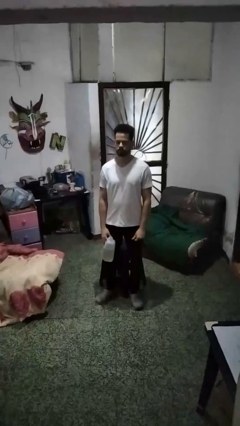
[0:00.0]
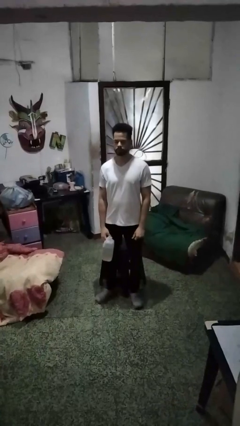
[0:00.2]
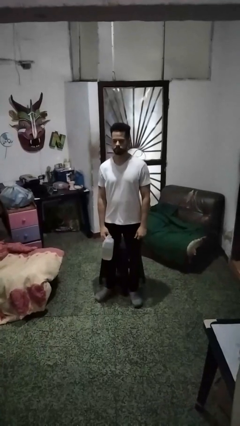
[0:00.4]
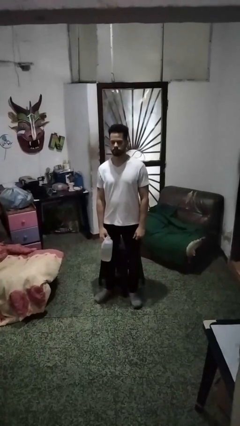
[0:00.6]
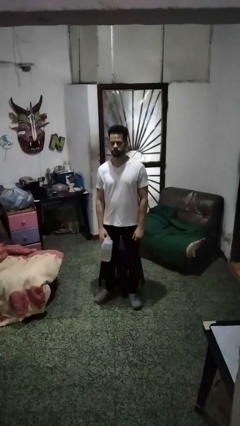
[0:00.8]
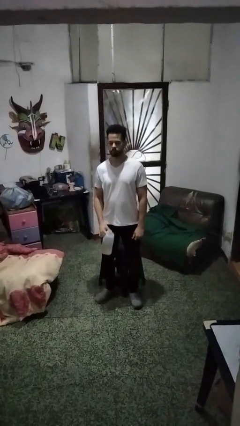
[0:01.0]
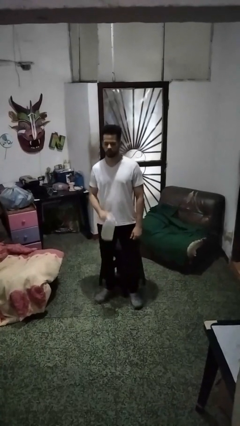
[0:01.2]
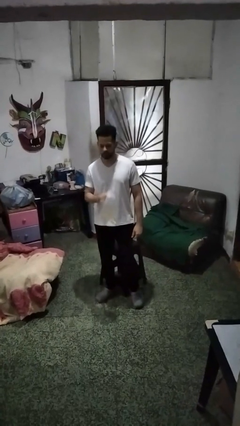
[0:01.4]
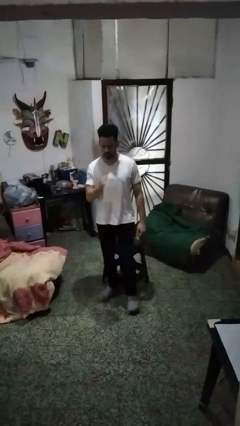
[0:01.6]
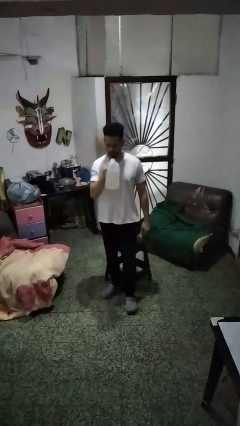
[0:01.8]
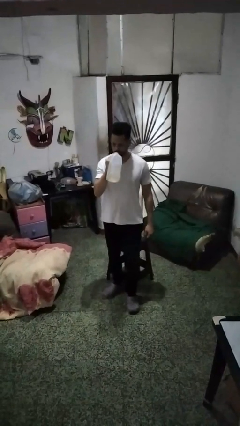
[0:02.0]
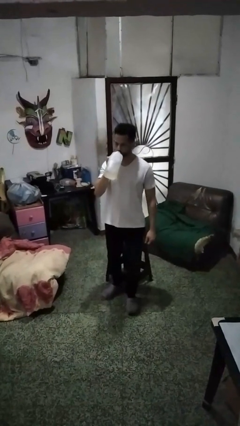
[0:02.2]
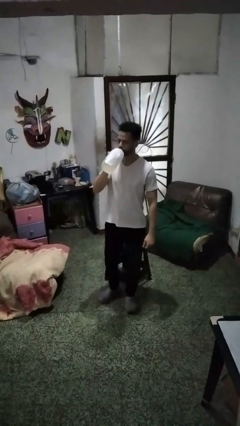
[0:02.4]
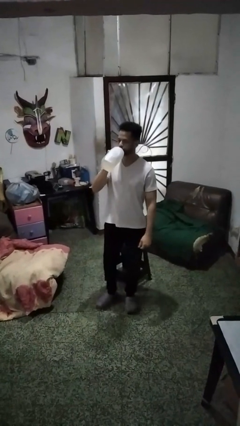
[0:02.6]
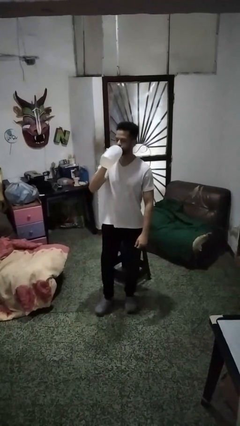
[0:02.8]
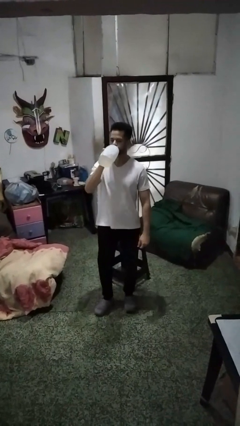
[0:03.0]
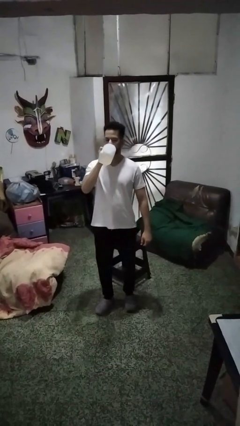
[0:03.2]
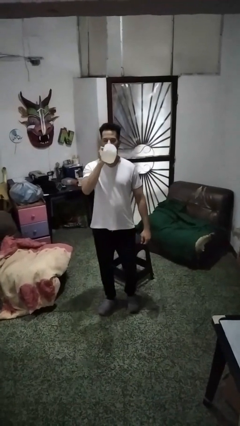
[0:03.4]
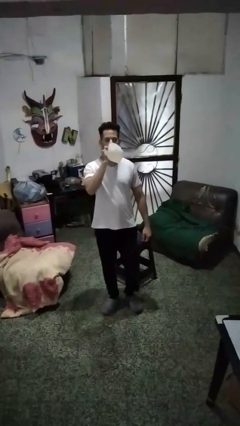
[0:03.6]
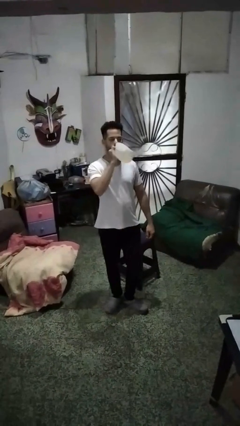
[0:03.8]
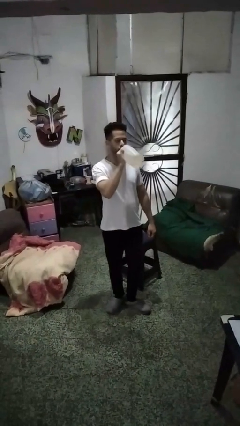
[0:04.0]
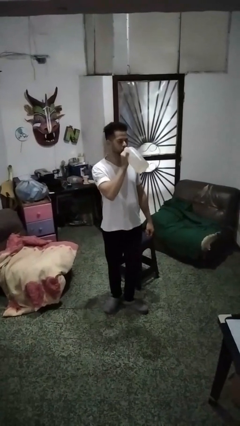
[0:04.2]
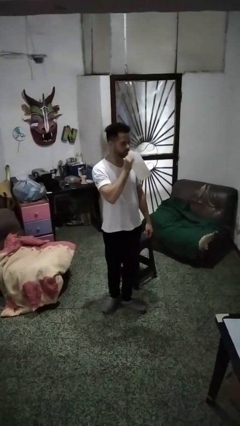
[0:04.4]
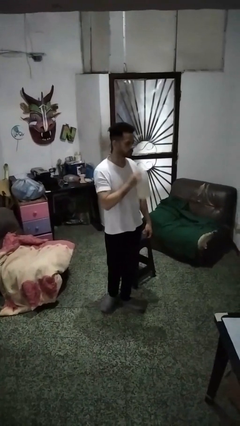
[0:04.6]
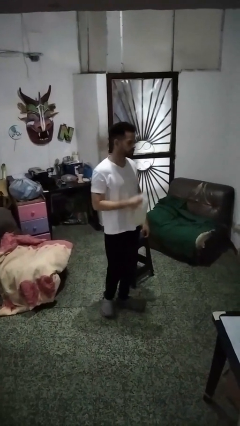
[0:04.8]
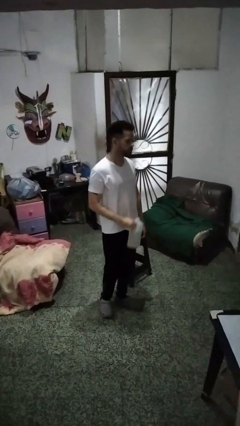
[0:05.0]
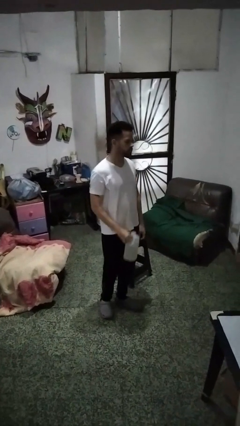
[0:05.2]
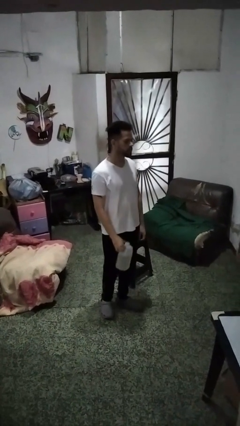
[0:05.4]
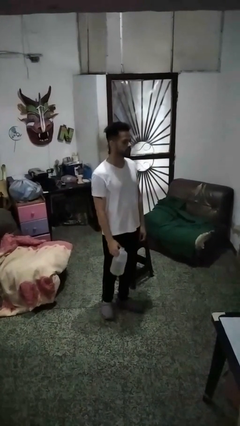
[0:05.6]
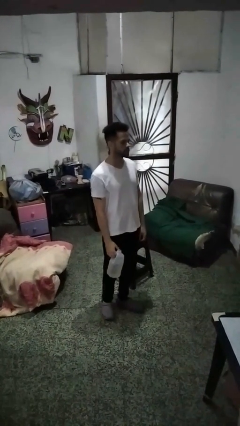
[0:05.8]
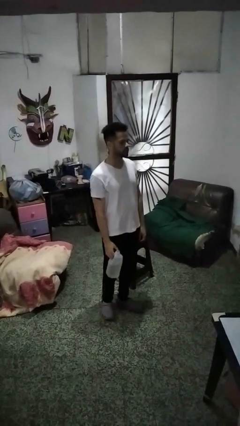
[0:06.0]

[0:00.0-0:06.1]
person drinks from bottle

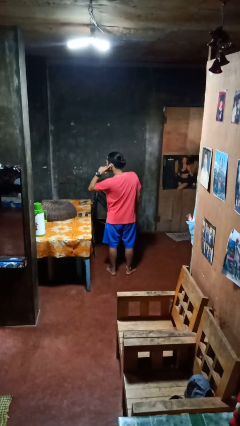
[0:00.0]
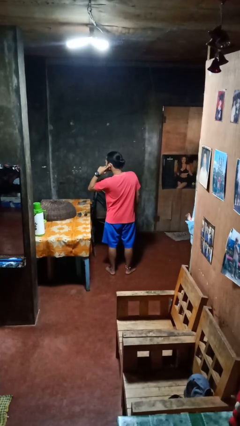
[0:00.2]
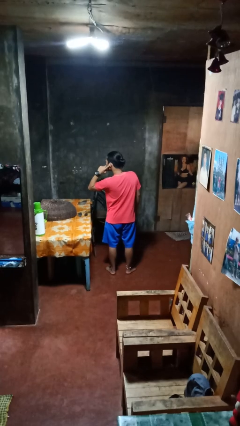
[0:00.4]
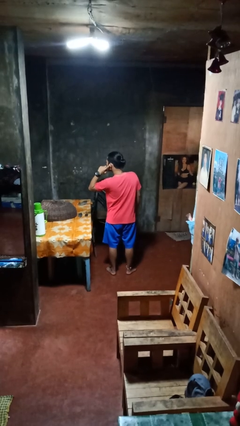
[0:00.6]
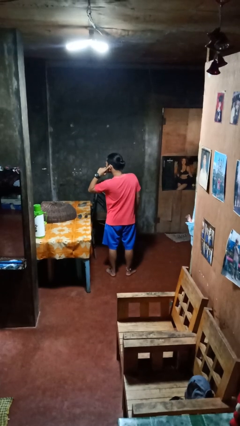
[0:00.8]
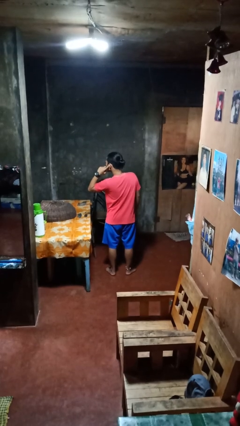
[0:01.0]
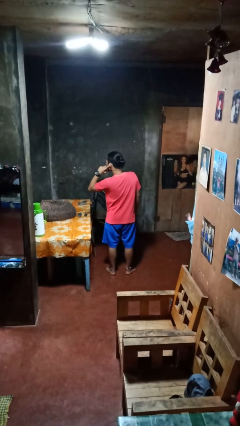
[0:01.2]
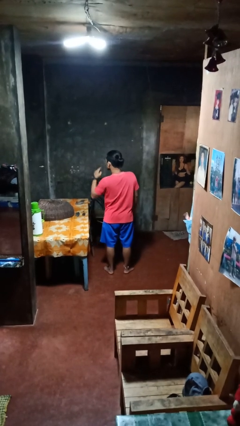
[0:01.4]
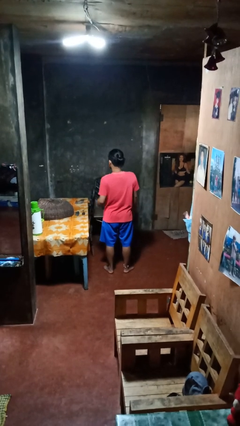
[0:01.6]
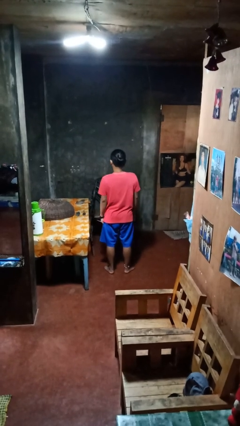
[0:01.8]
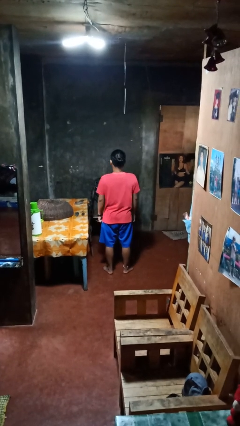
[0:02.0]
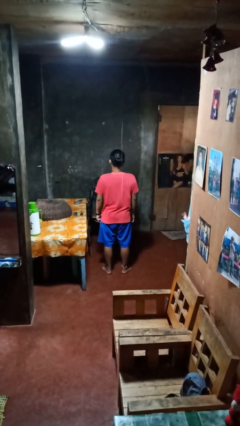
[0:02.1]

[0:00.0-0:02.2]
person gestures listen closely

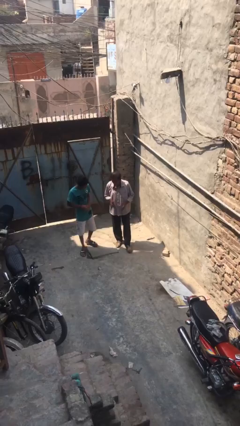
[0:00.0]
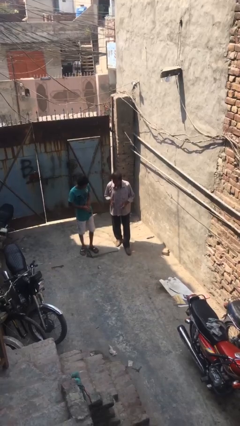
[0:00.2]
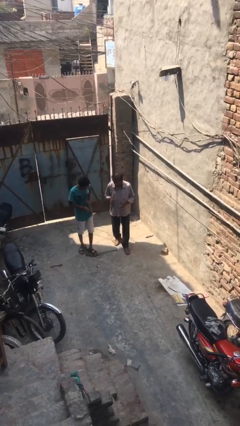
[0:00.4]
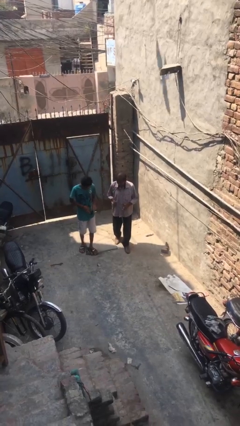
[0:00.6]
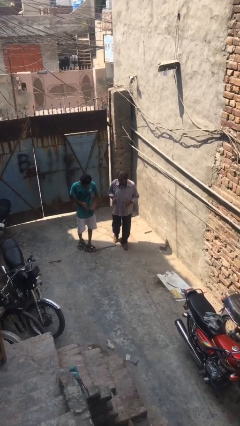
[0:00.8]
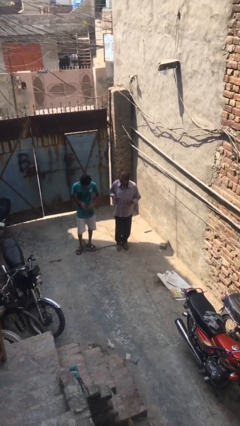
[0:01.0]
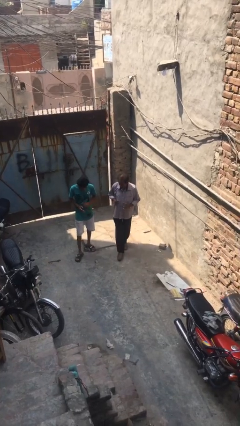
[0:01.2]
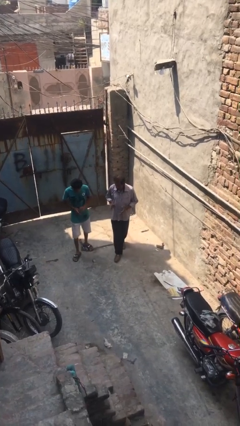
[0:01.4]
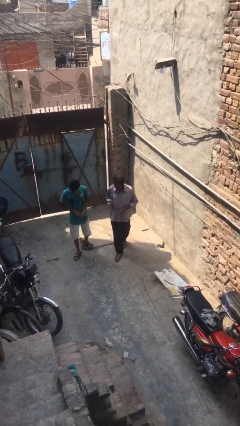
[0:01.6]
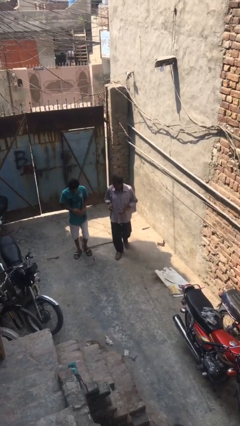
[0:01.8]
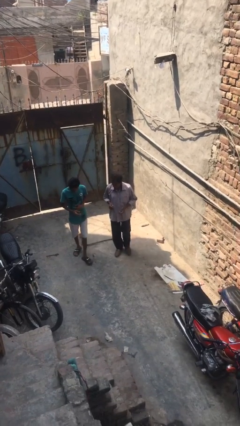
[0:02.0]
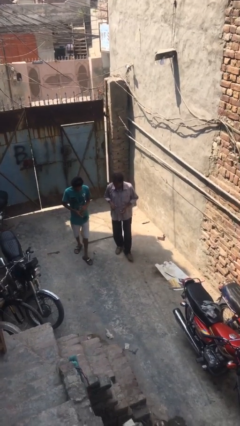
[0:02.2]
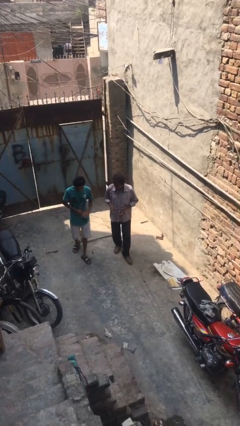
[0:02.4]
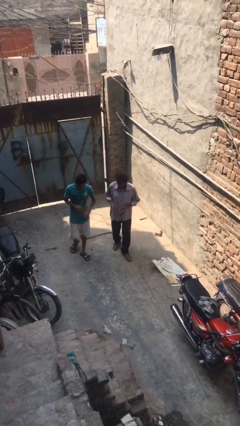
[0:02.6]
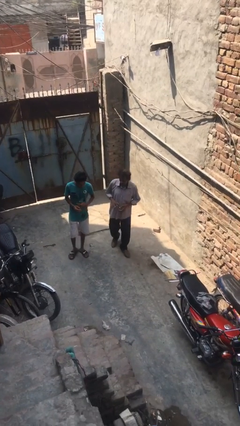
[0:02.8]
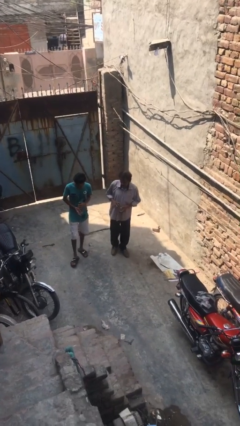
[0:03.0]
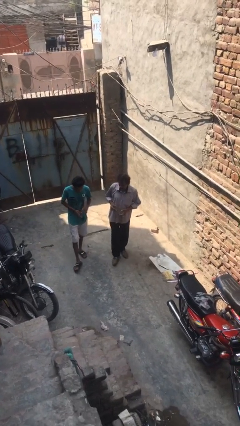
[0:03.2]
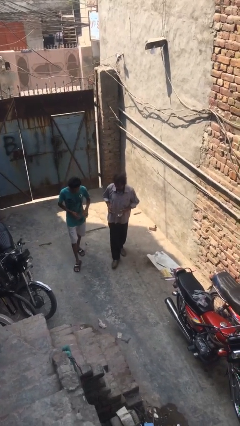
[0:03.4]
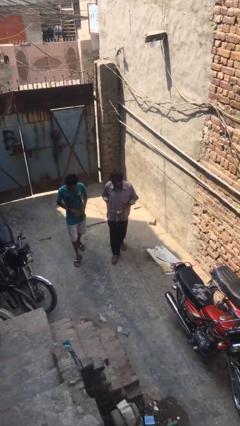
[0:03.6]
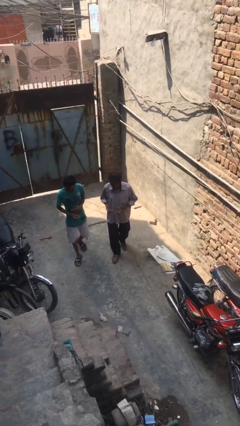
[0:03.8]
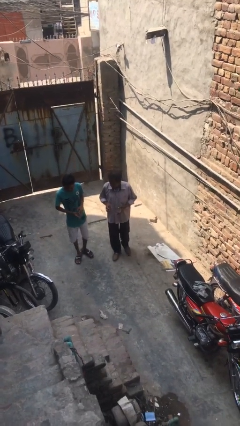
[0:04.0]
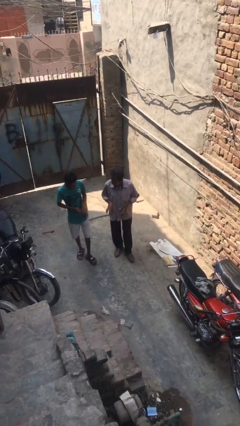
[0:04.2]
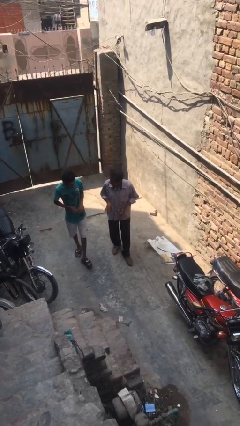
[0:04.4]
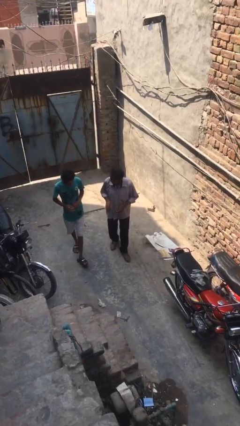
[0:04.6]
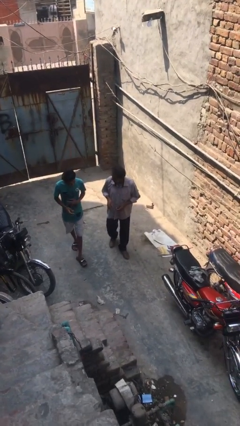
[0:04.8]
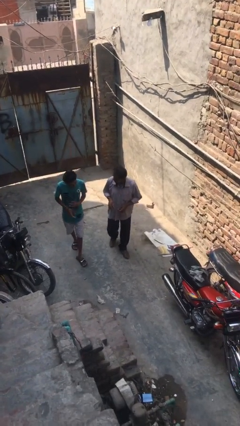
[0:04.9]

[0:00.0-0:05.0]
person talks to person

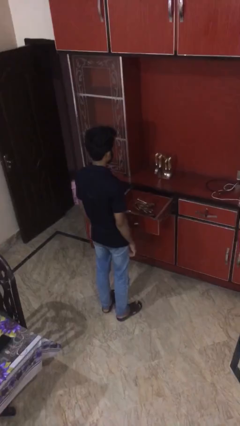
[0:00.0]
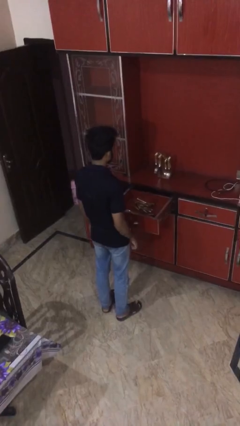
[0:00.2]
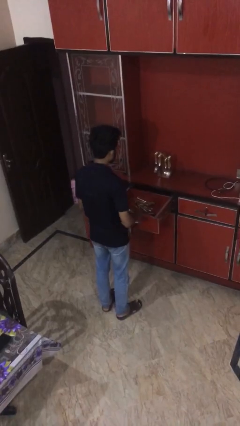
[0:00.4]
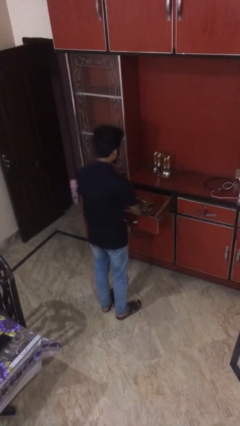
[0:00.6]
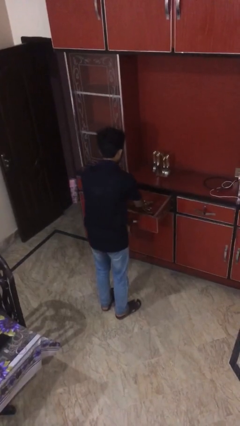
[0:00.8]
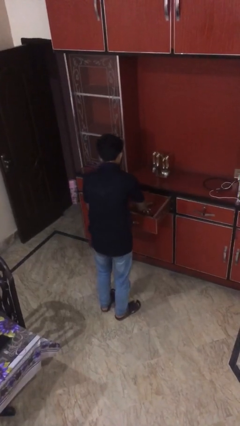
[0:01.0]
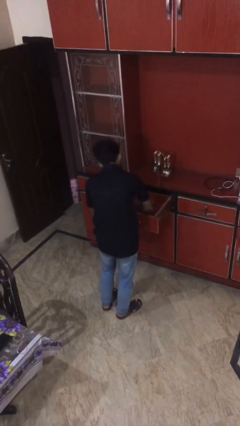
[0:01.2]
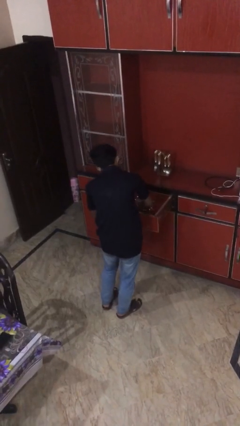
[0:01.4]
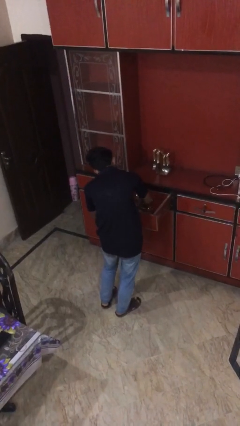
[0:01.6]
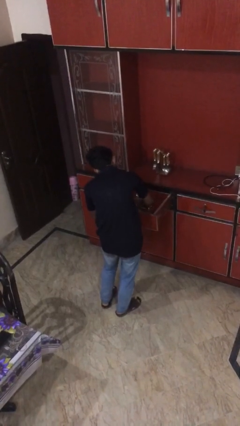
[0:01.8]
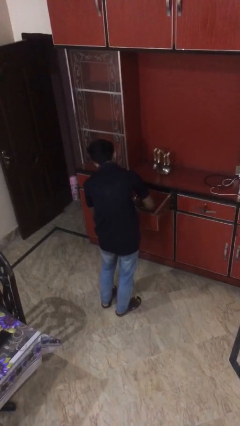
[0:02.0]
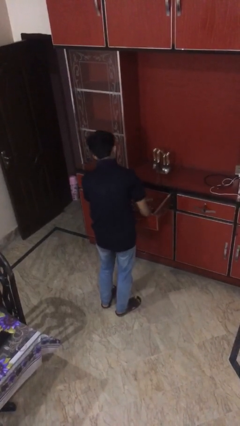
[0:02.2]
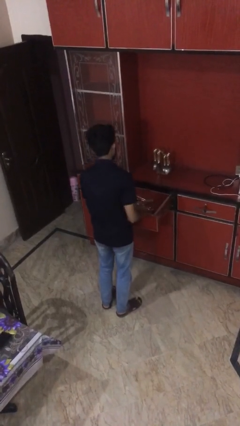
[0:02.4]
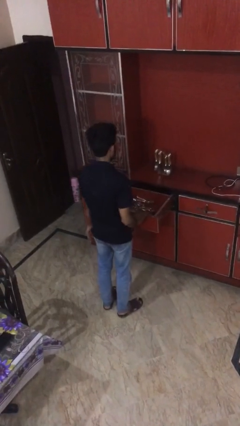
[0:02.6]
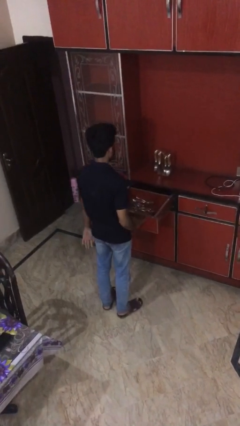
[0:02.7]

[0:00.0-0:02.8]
person searches in kitchen drawer

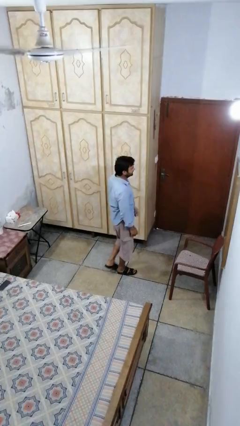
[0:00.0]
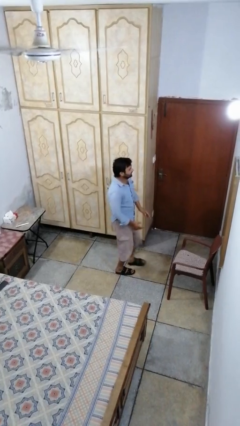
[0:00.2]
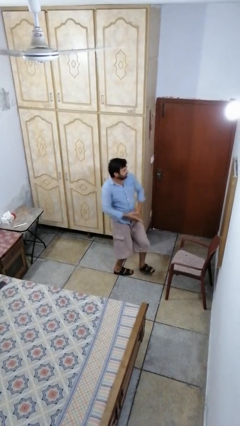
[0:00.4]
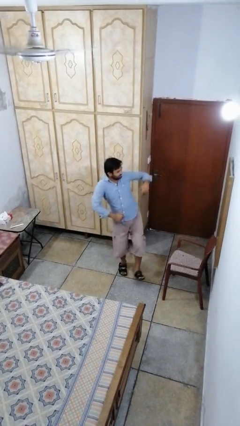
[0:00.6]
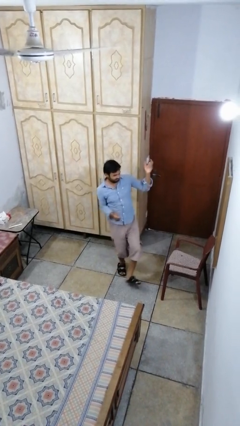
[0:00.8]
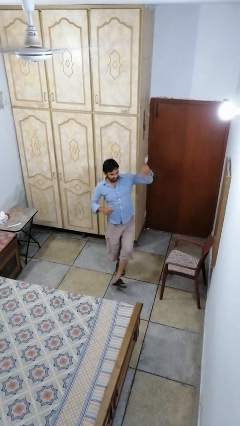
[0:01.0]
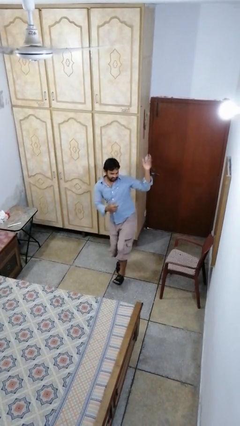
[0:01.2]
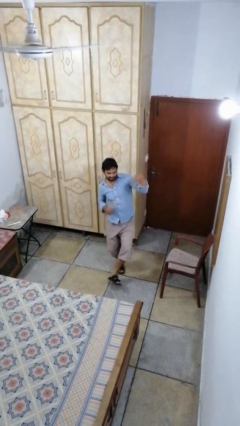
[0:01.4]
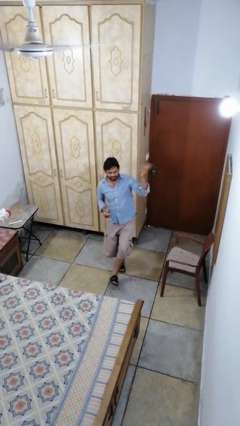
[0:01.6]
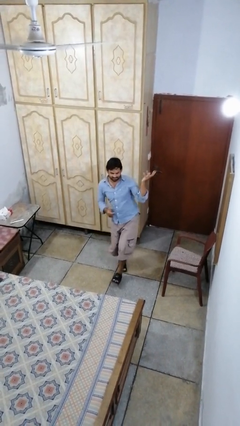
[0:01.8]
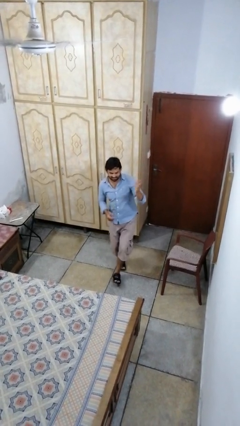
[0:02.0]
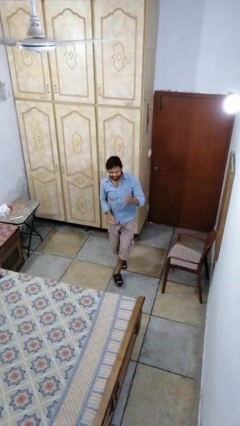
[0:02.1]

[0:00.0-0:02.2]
person dances in place
